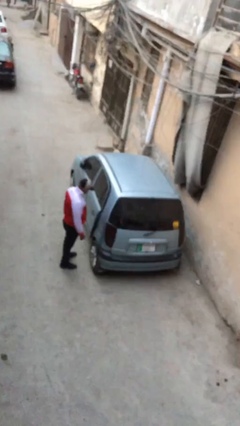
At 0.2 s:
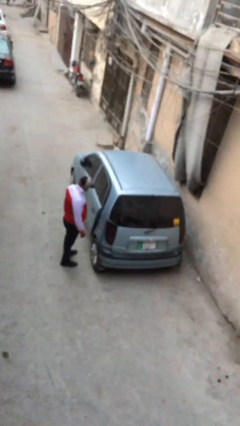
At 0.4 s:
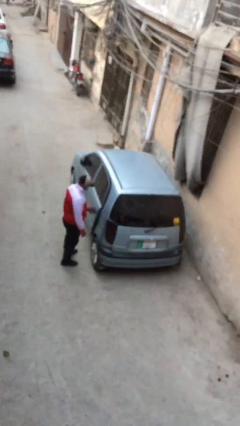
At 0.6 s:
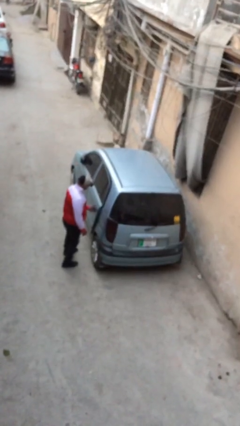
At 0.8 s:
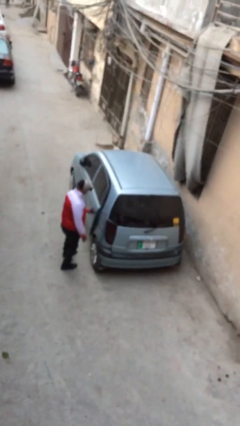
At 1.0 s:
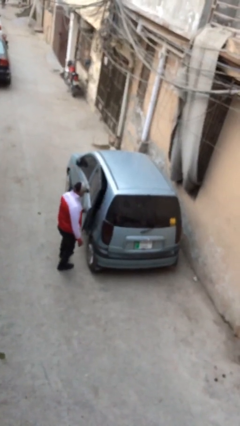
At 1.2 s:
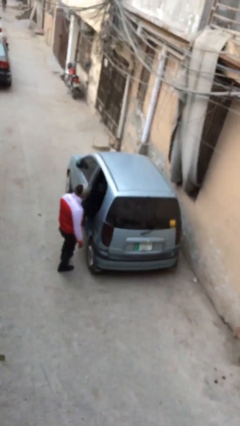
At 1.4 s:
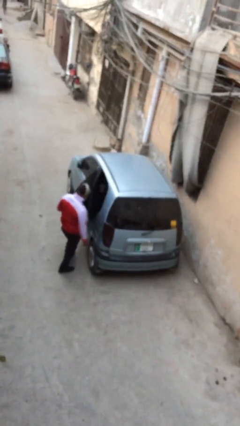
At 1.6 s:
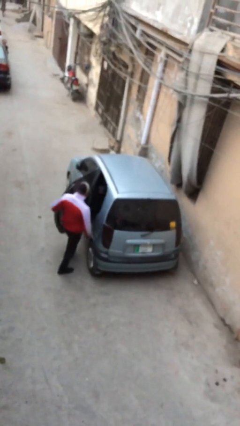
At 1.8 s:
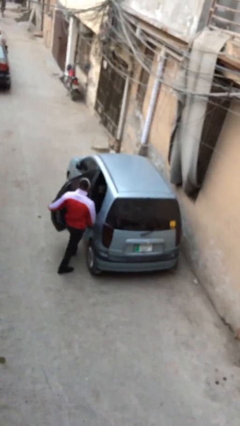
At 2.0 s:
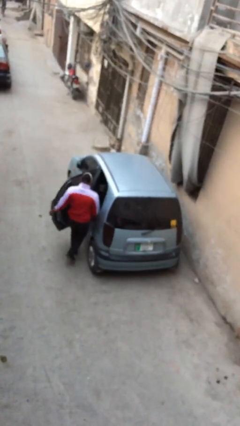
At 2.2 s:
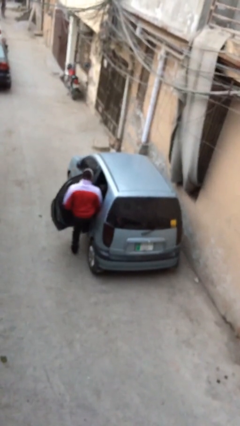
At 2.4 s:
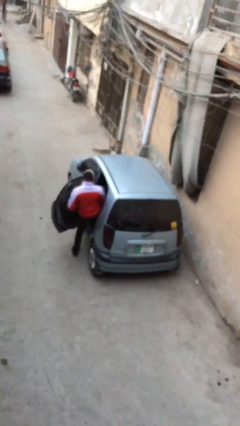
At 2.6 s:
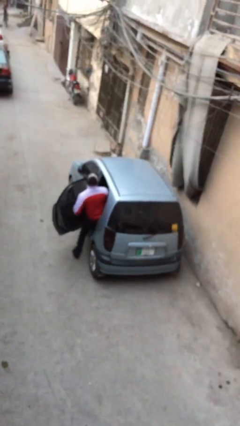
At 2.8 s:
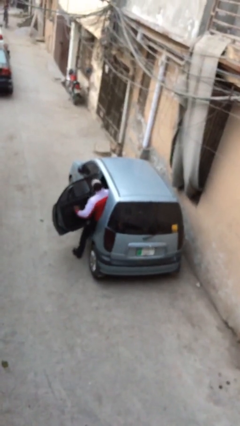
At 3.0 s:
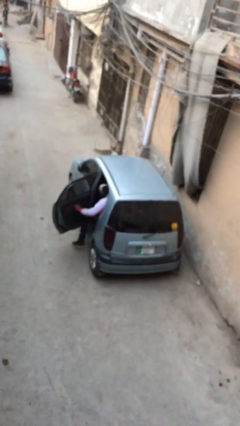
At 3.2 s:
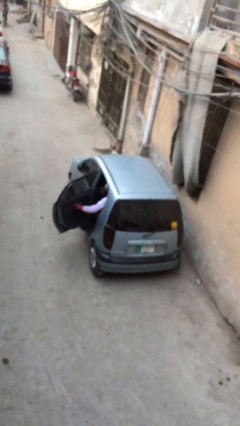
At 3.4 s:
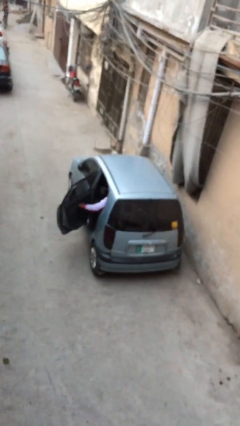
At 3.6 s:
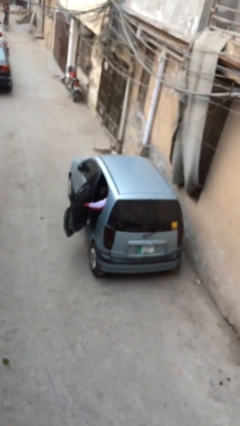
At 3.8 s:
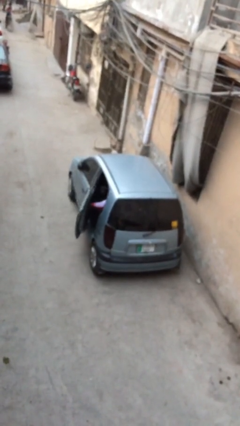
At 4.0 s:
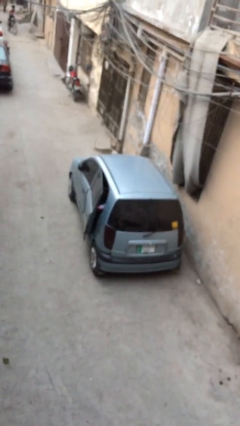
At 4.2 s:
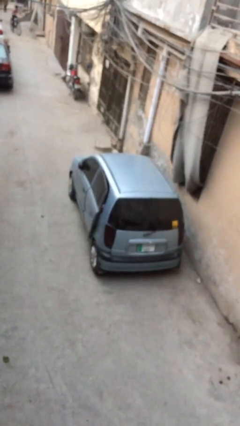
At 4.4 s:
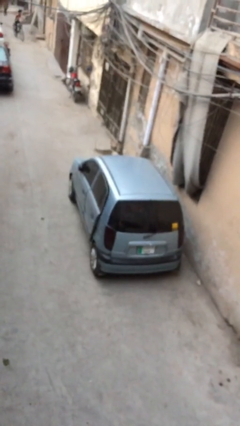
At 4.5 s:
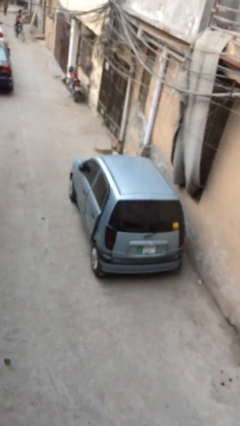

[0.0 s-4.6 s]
car picks up person

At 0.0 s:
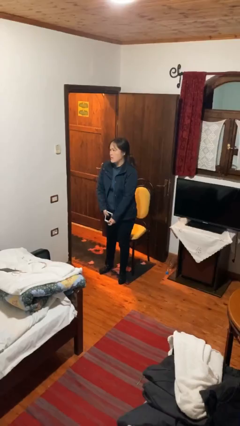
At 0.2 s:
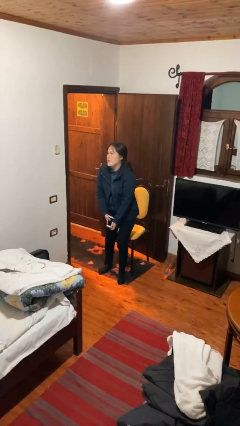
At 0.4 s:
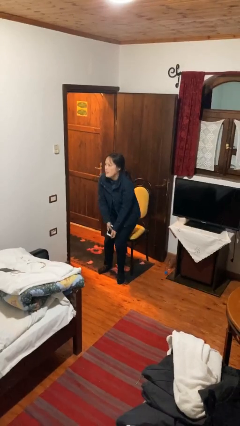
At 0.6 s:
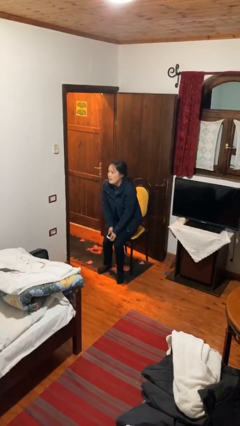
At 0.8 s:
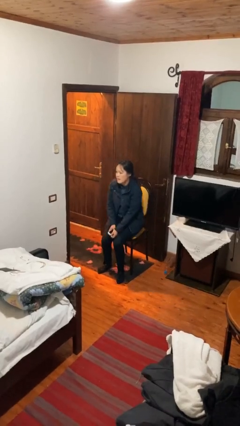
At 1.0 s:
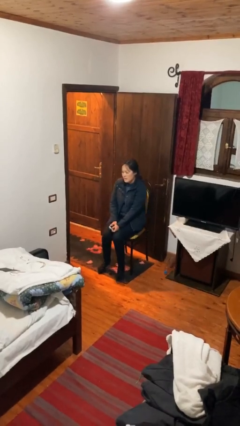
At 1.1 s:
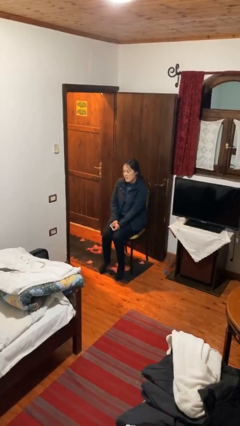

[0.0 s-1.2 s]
person sits down

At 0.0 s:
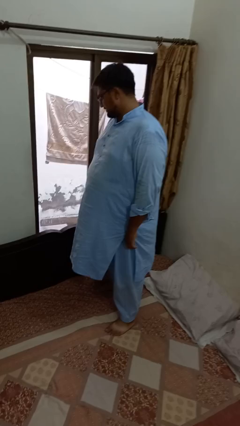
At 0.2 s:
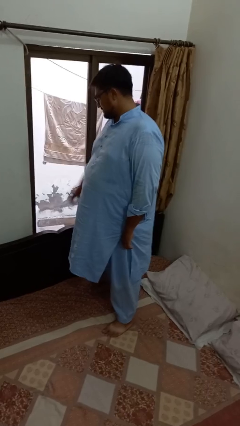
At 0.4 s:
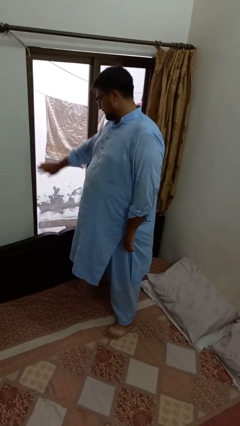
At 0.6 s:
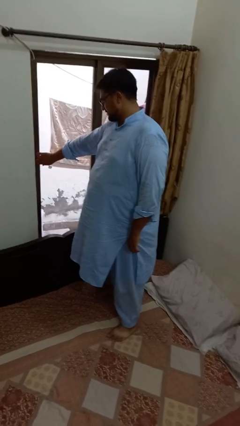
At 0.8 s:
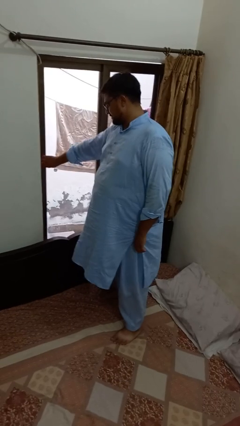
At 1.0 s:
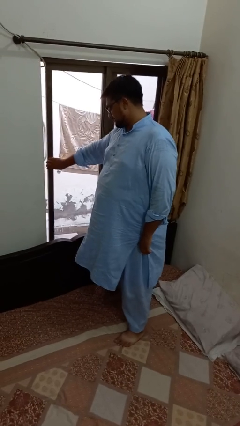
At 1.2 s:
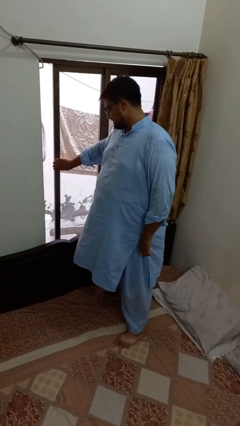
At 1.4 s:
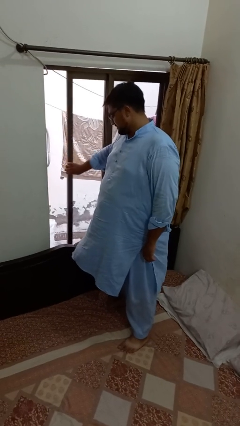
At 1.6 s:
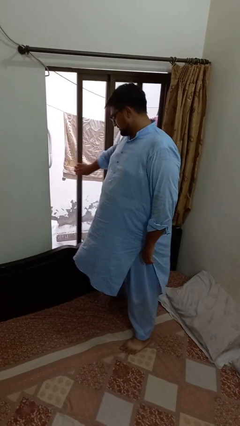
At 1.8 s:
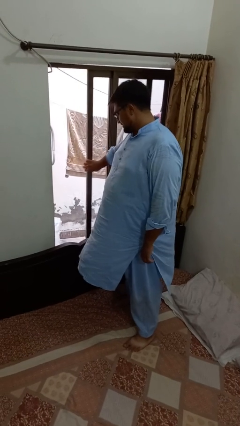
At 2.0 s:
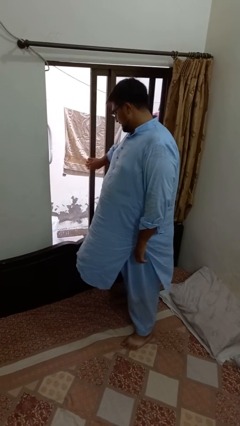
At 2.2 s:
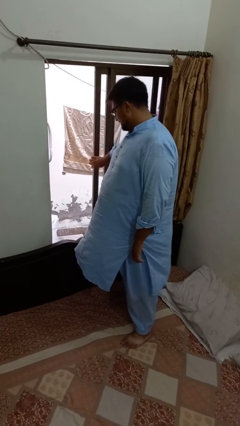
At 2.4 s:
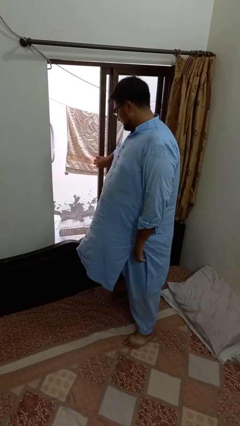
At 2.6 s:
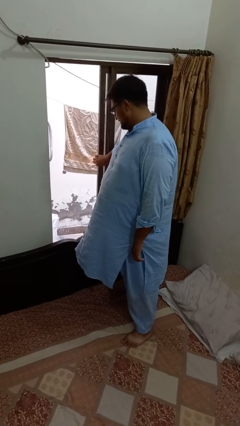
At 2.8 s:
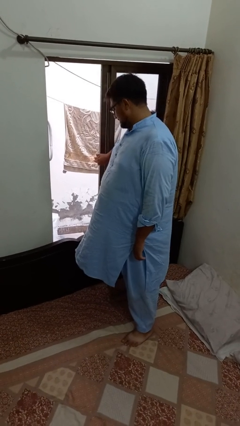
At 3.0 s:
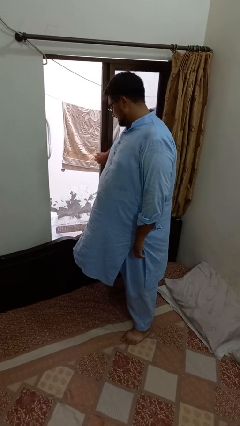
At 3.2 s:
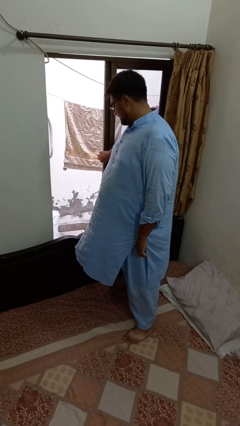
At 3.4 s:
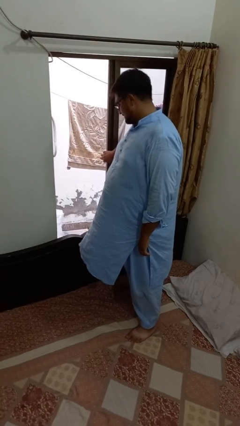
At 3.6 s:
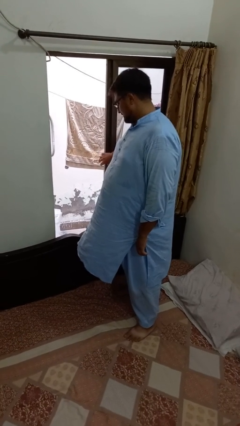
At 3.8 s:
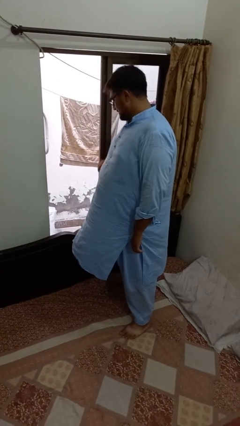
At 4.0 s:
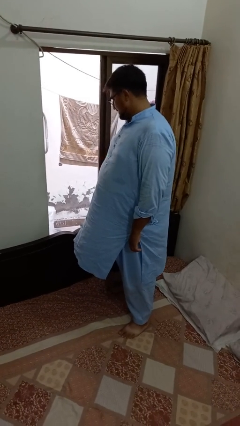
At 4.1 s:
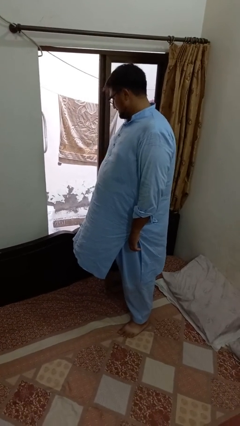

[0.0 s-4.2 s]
person opens home window

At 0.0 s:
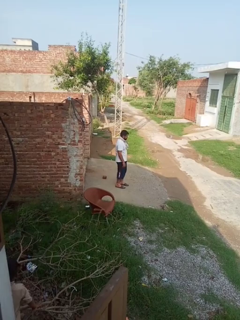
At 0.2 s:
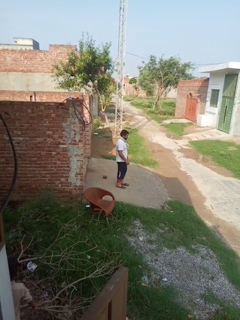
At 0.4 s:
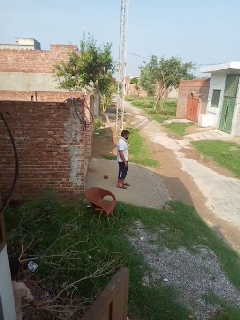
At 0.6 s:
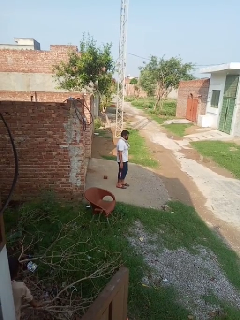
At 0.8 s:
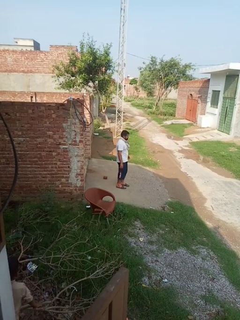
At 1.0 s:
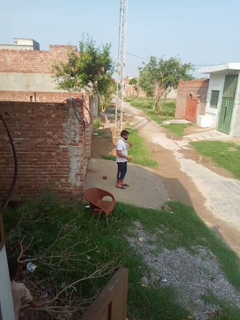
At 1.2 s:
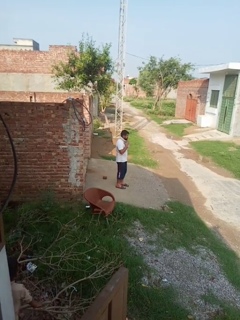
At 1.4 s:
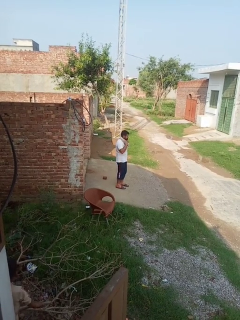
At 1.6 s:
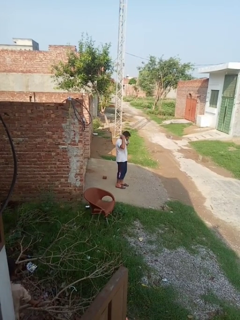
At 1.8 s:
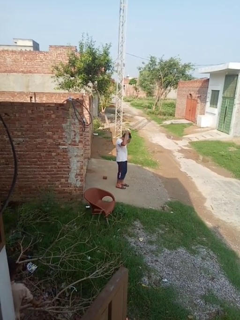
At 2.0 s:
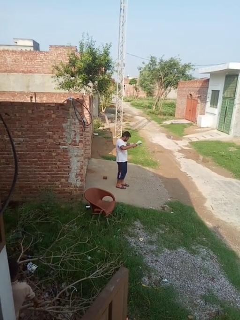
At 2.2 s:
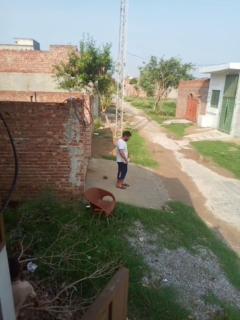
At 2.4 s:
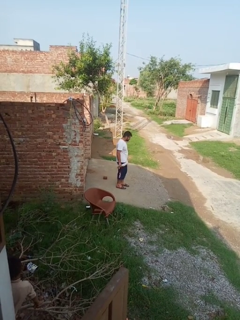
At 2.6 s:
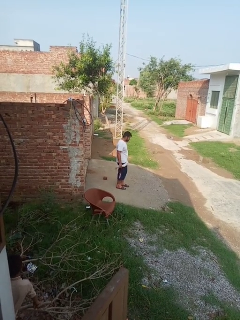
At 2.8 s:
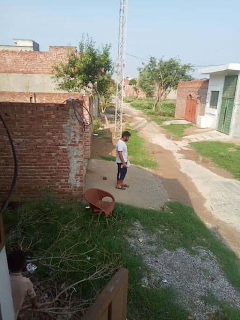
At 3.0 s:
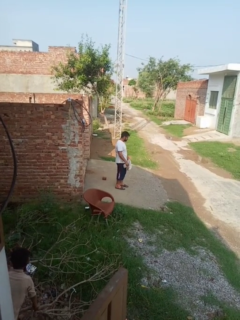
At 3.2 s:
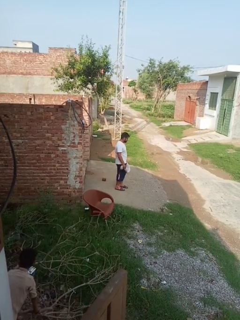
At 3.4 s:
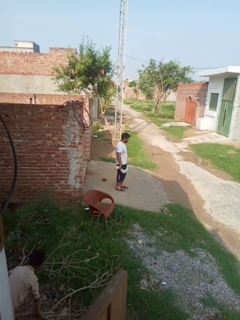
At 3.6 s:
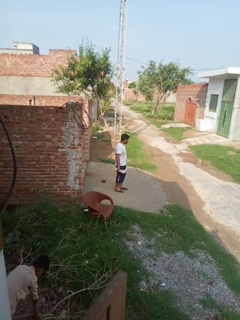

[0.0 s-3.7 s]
person takes off scarf

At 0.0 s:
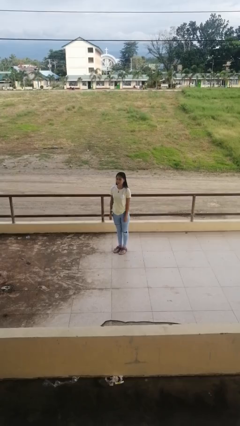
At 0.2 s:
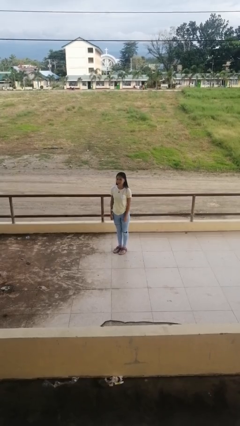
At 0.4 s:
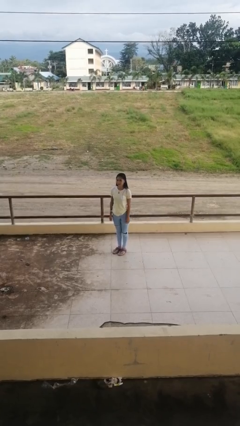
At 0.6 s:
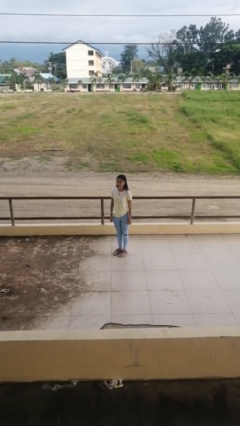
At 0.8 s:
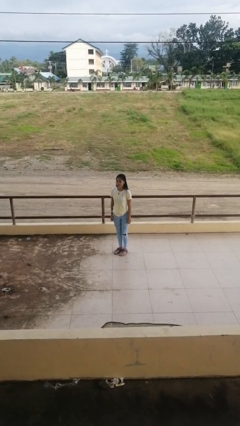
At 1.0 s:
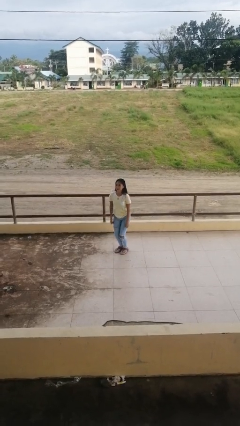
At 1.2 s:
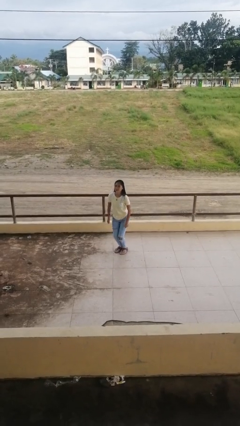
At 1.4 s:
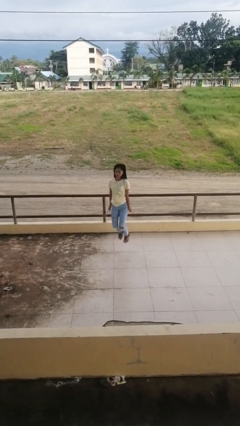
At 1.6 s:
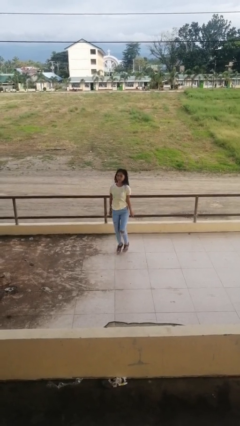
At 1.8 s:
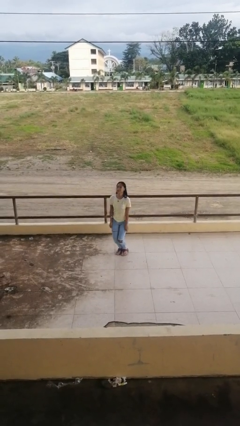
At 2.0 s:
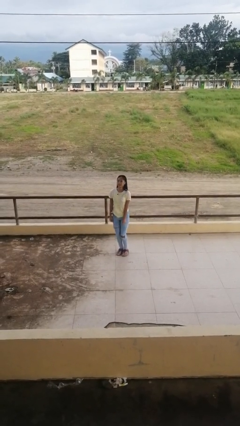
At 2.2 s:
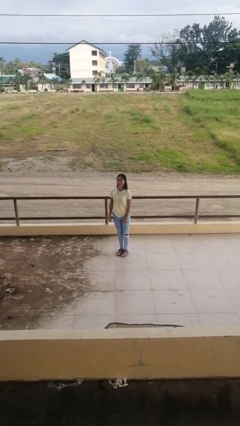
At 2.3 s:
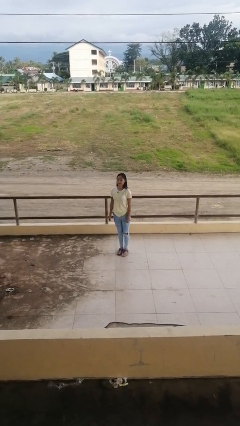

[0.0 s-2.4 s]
person jumps

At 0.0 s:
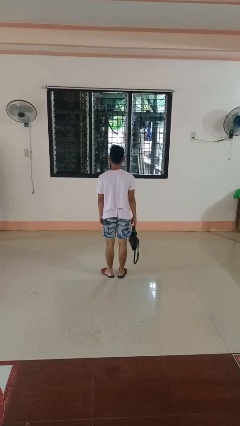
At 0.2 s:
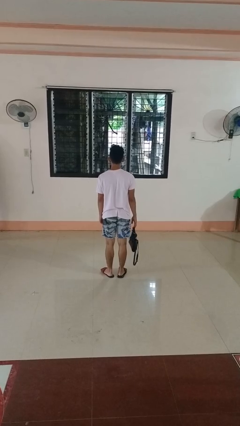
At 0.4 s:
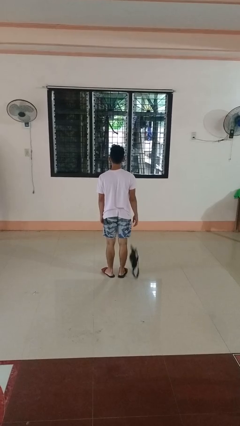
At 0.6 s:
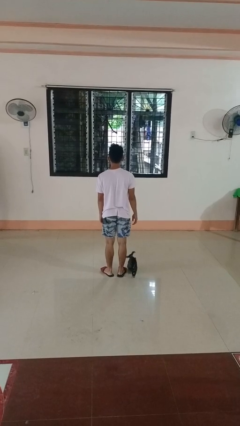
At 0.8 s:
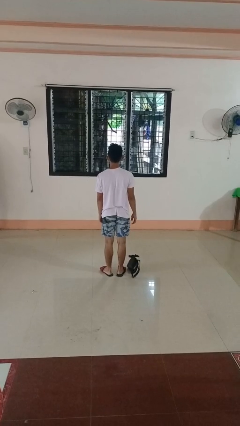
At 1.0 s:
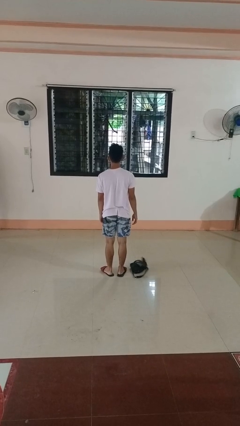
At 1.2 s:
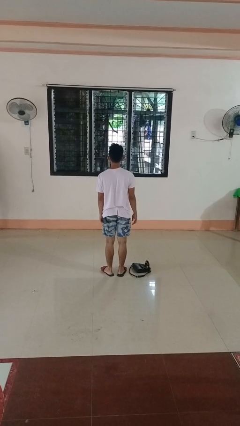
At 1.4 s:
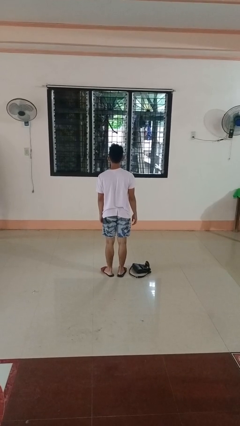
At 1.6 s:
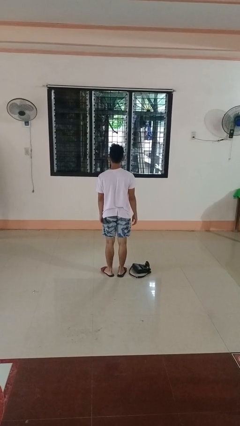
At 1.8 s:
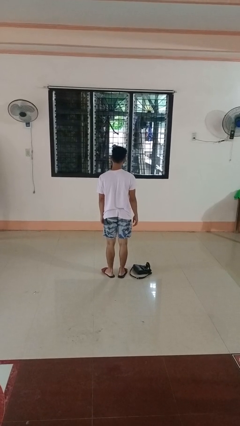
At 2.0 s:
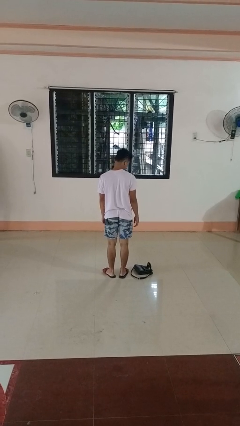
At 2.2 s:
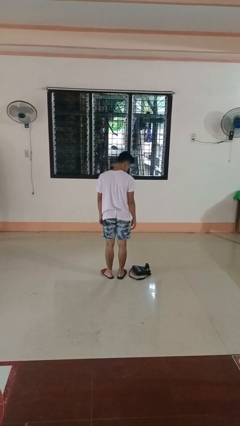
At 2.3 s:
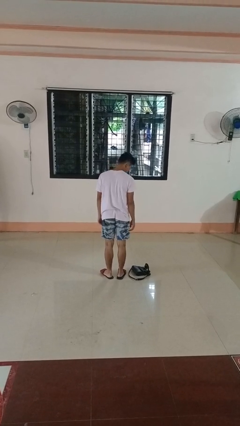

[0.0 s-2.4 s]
person drops object
